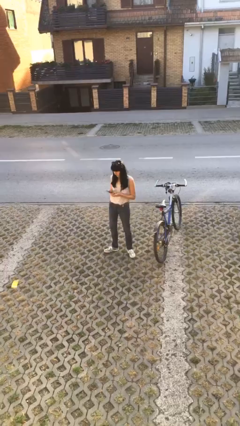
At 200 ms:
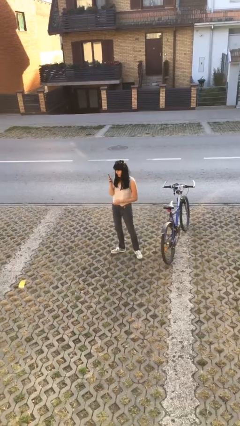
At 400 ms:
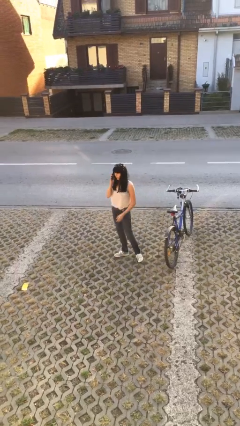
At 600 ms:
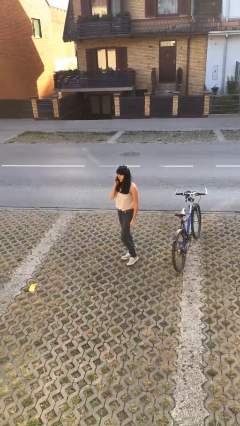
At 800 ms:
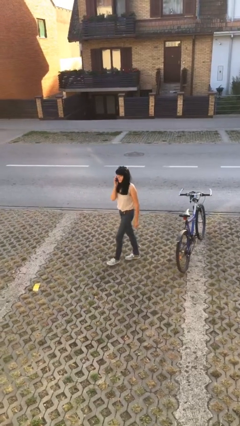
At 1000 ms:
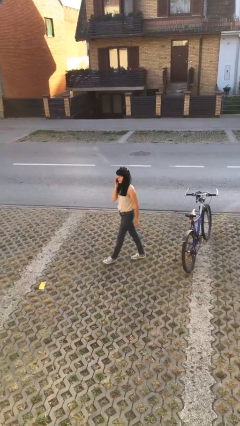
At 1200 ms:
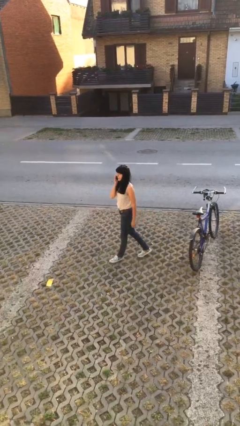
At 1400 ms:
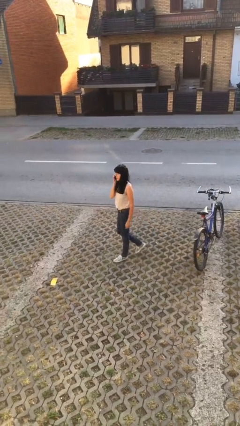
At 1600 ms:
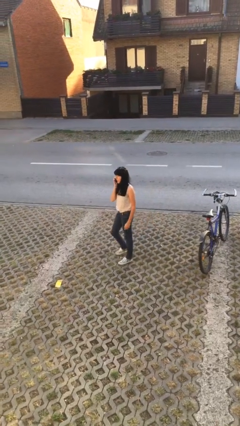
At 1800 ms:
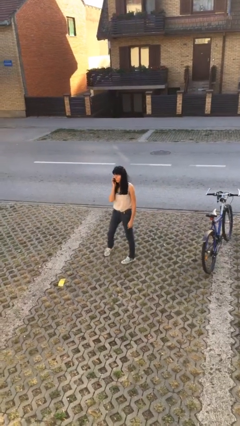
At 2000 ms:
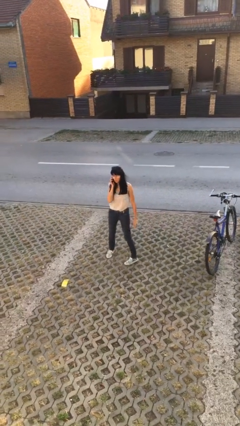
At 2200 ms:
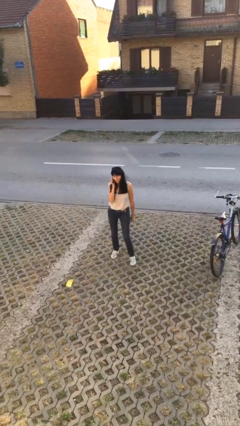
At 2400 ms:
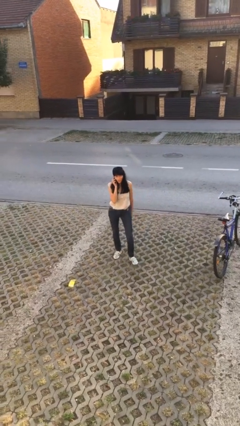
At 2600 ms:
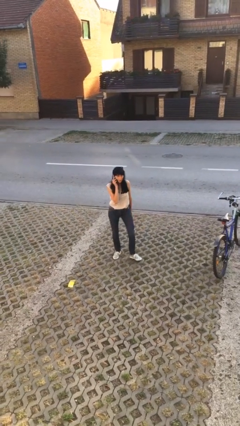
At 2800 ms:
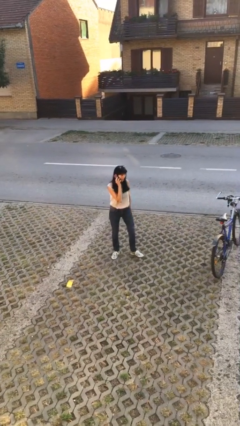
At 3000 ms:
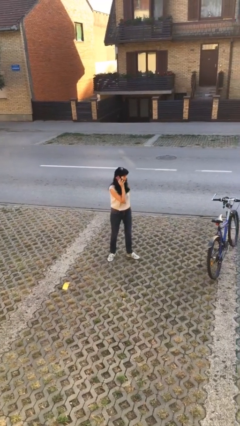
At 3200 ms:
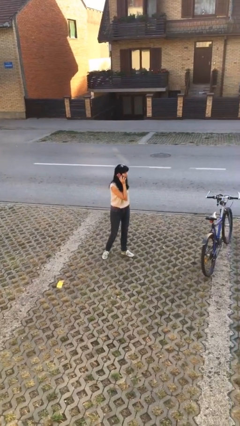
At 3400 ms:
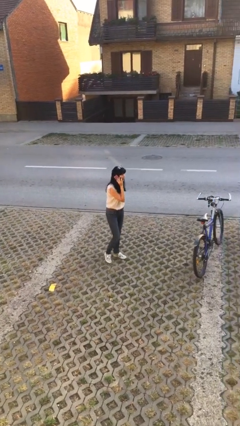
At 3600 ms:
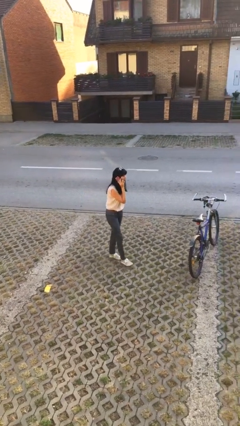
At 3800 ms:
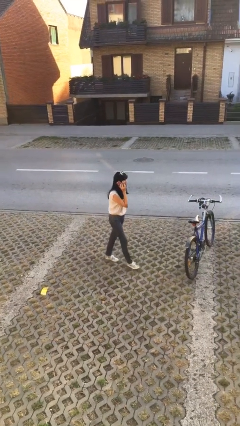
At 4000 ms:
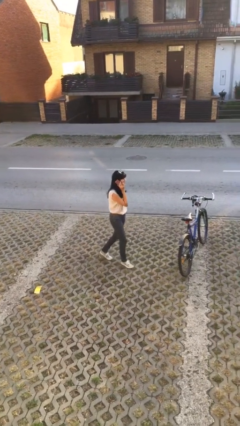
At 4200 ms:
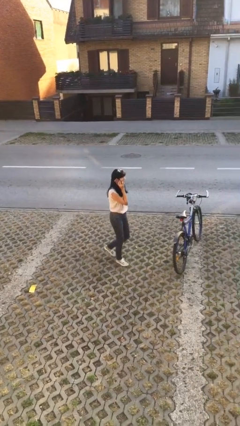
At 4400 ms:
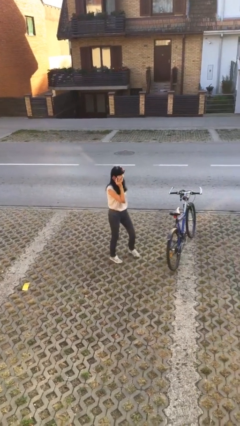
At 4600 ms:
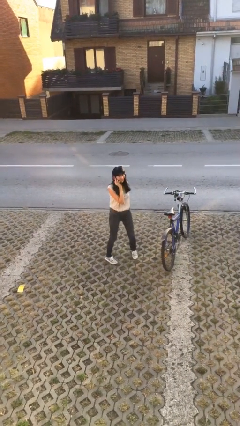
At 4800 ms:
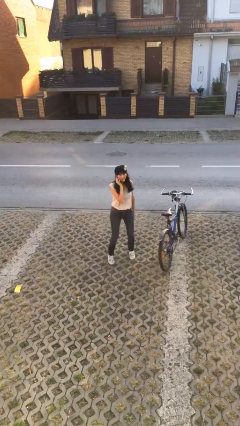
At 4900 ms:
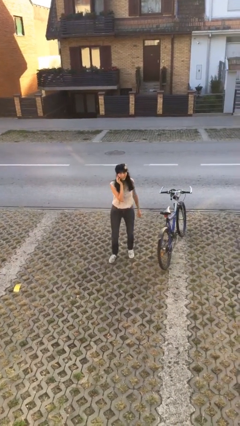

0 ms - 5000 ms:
person talks on phone

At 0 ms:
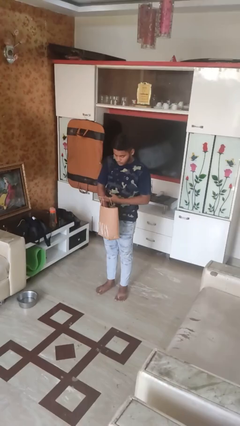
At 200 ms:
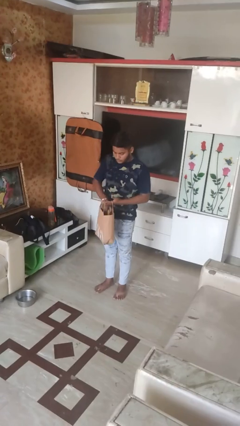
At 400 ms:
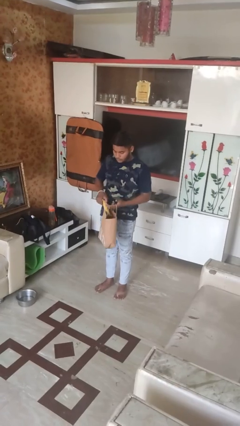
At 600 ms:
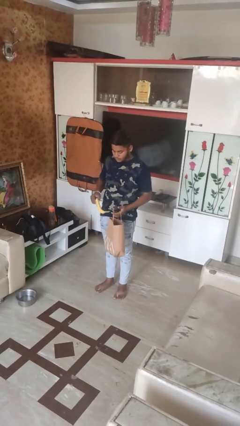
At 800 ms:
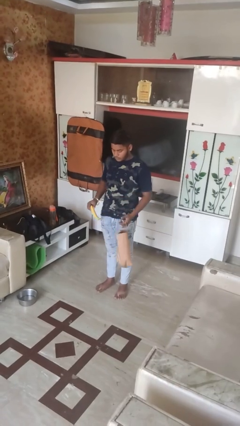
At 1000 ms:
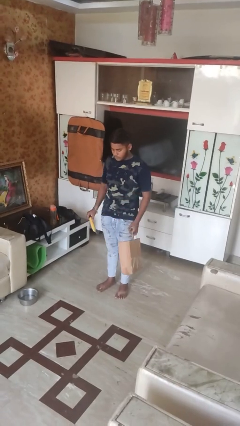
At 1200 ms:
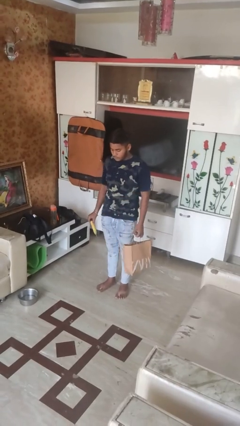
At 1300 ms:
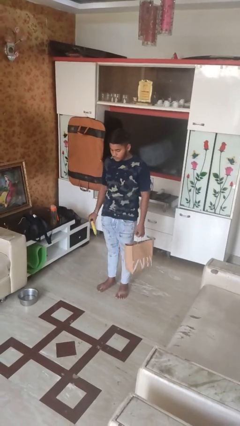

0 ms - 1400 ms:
person takes object from bag

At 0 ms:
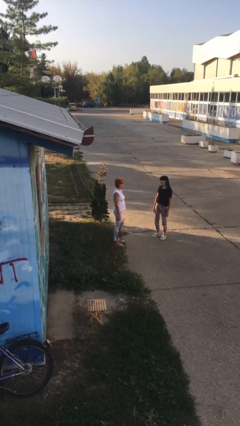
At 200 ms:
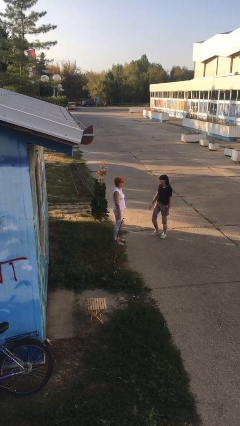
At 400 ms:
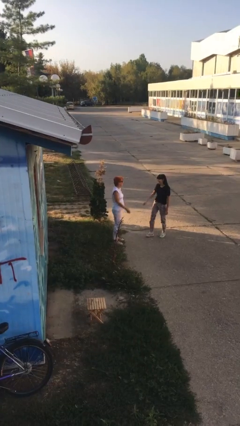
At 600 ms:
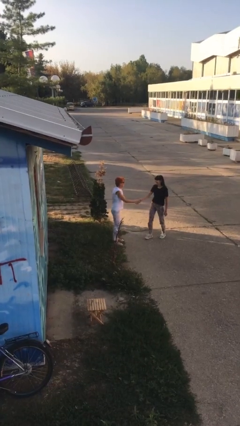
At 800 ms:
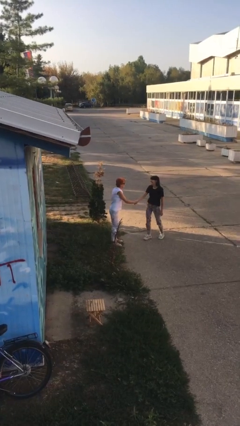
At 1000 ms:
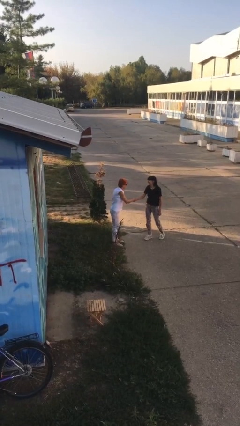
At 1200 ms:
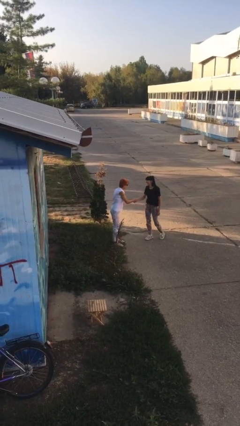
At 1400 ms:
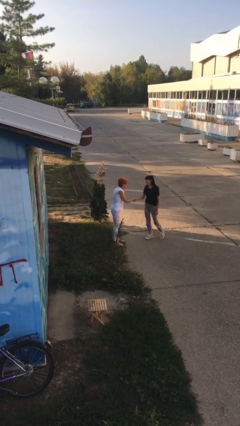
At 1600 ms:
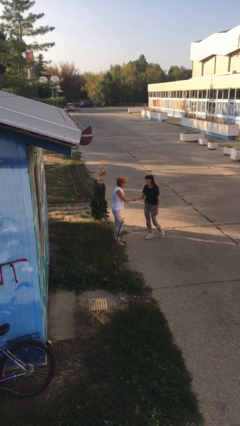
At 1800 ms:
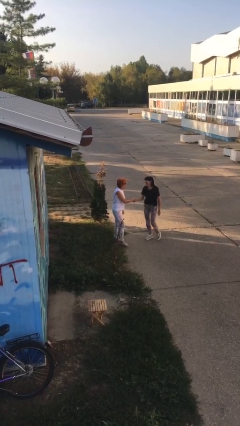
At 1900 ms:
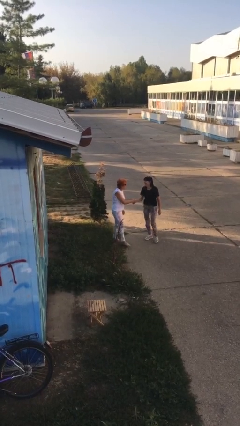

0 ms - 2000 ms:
person shakes hand

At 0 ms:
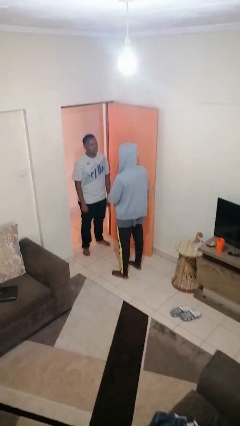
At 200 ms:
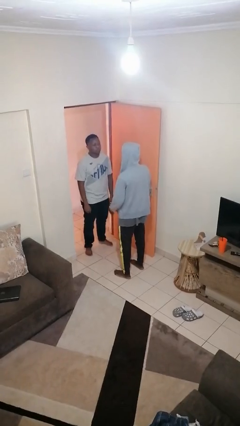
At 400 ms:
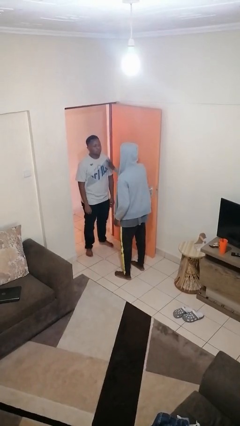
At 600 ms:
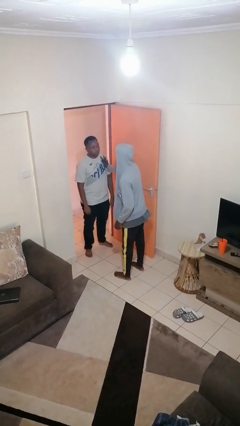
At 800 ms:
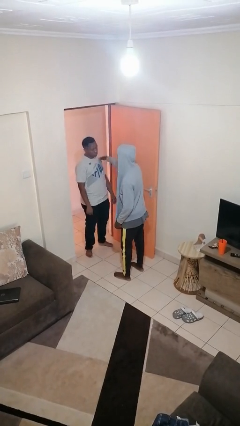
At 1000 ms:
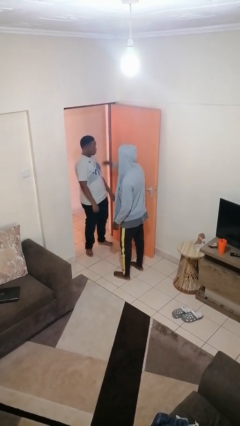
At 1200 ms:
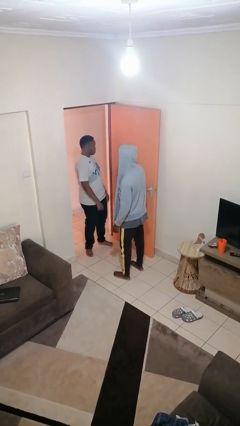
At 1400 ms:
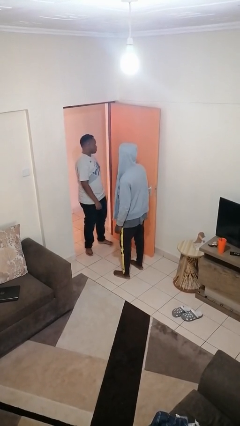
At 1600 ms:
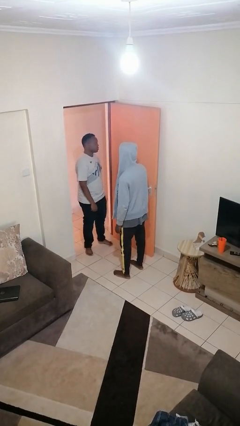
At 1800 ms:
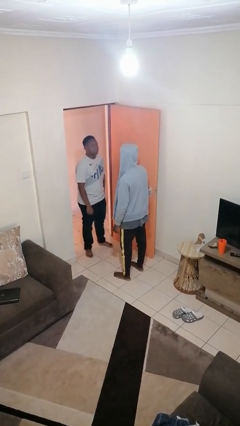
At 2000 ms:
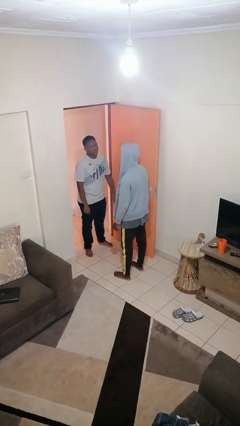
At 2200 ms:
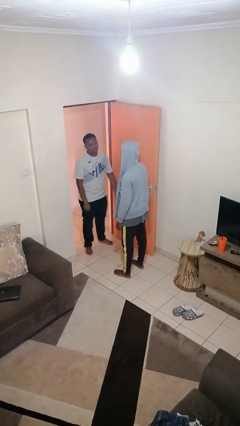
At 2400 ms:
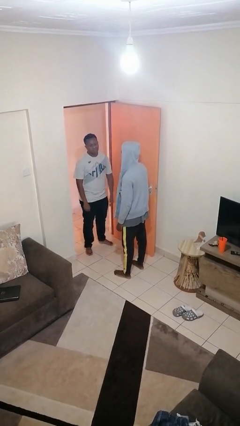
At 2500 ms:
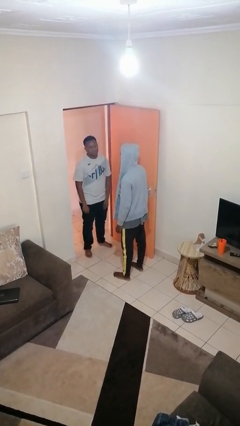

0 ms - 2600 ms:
person shoves person

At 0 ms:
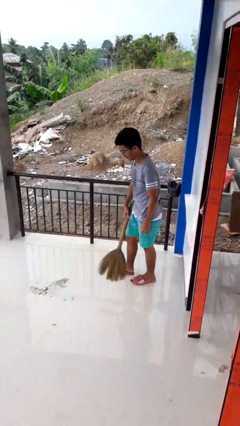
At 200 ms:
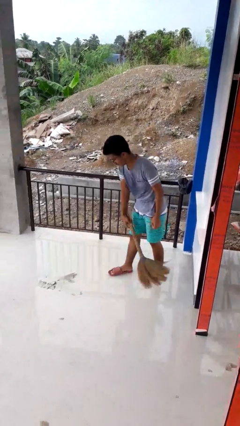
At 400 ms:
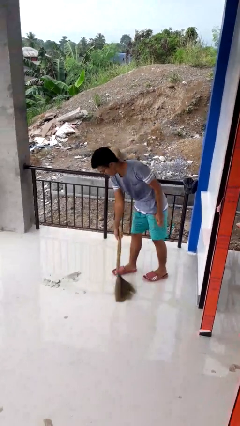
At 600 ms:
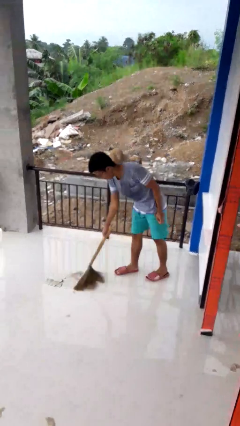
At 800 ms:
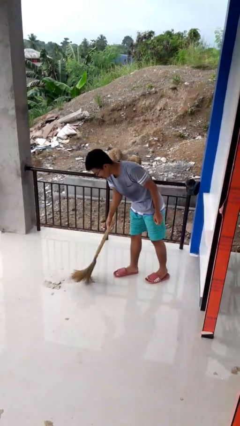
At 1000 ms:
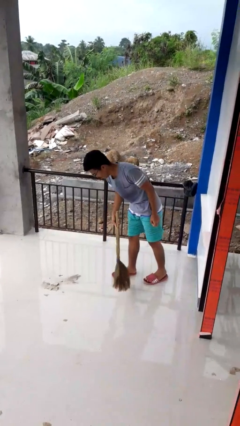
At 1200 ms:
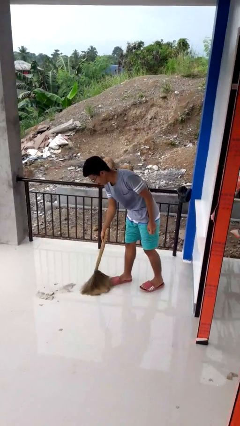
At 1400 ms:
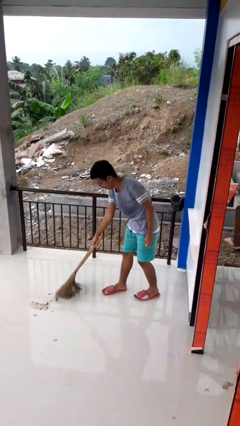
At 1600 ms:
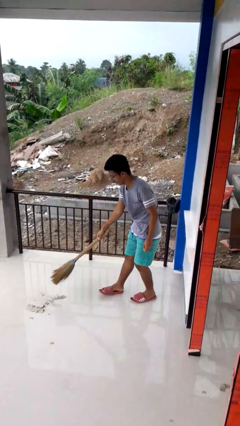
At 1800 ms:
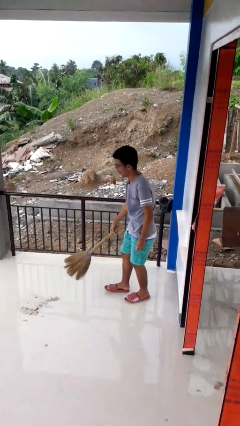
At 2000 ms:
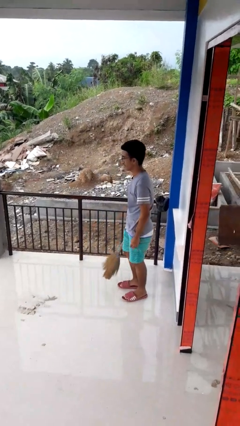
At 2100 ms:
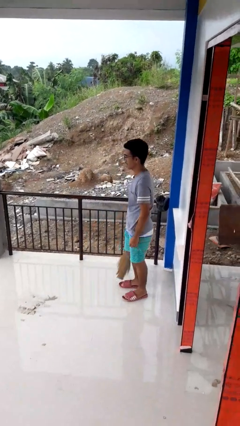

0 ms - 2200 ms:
person sweeps floor

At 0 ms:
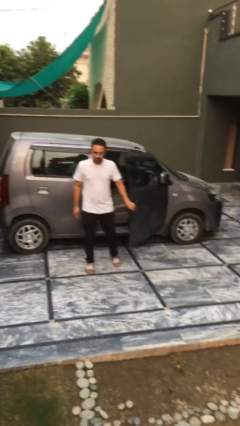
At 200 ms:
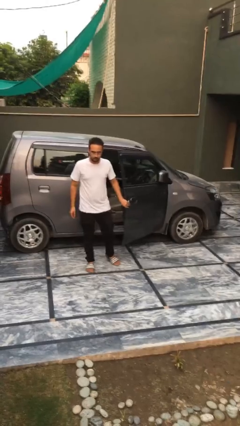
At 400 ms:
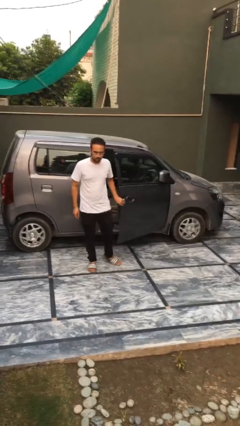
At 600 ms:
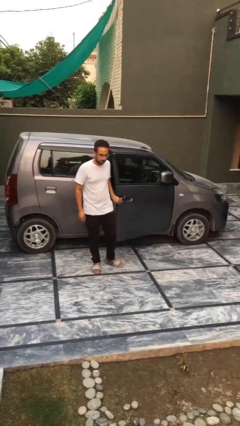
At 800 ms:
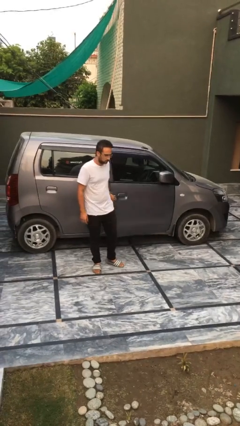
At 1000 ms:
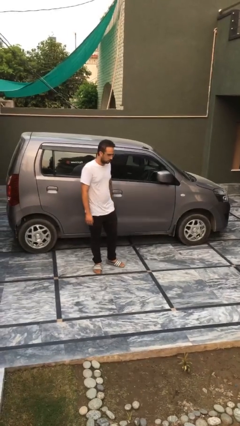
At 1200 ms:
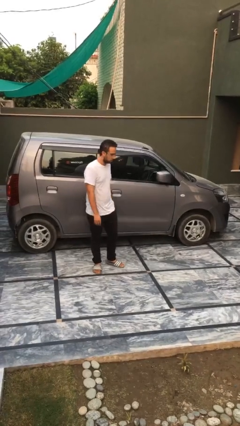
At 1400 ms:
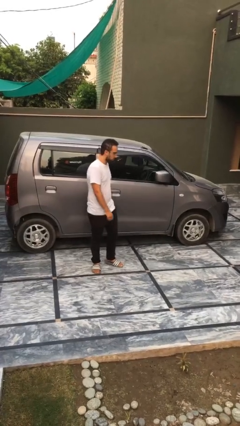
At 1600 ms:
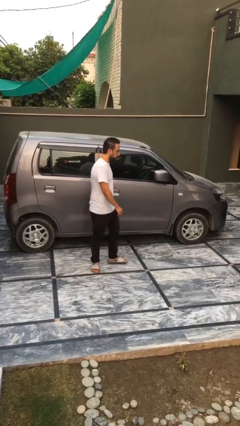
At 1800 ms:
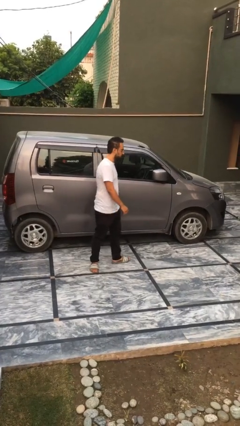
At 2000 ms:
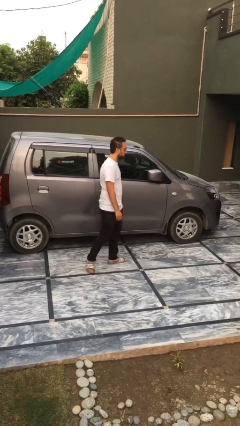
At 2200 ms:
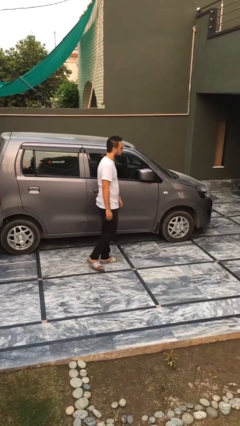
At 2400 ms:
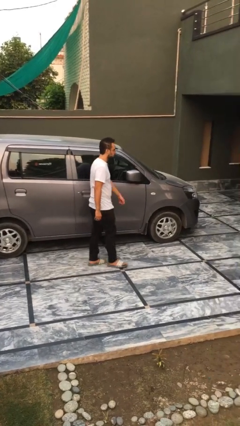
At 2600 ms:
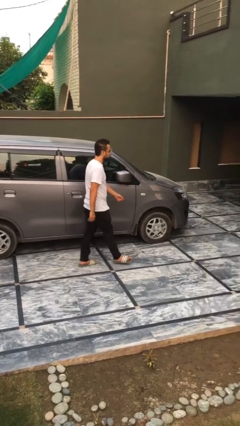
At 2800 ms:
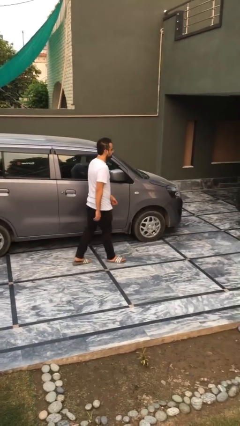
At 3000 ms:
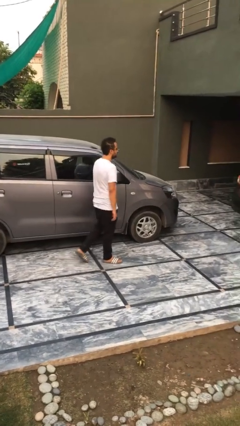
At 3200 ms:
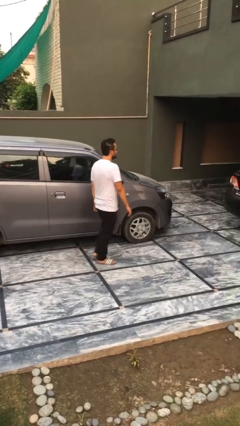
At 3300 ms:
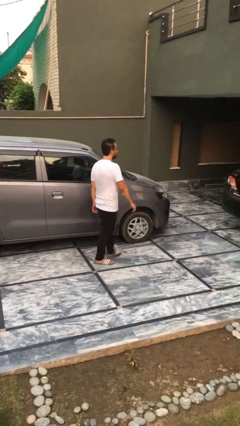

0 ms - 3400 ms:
person closes car door

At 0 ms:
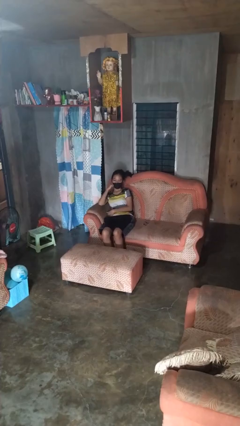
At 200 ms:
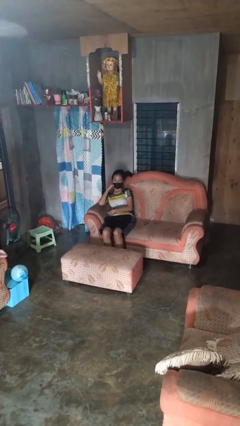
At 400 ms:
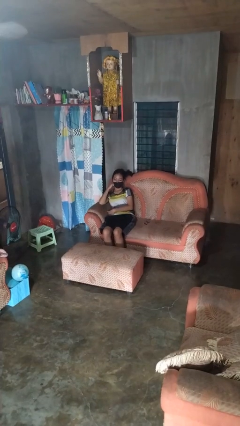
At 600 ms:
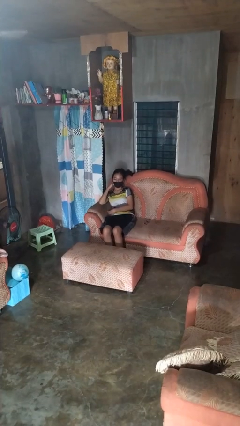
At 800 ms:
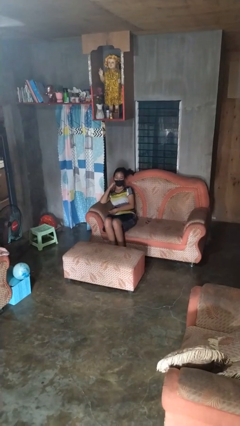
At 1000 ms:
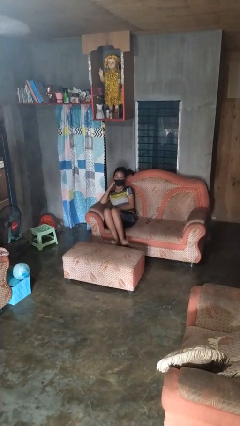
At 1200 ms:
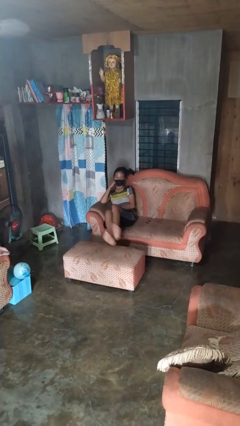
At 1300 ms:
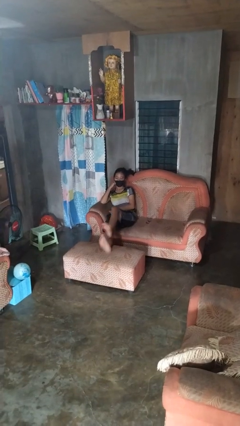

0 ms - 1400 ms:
person puts feet up
